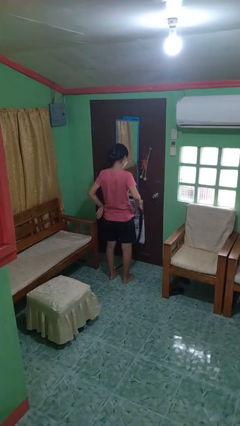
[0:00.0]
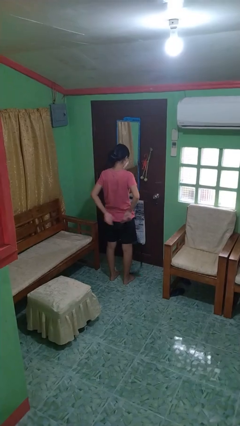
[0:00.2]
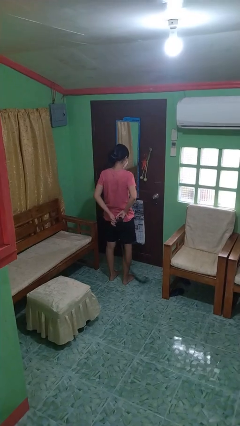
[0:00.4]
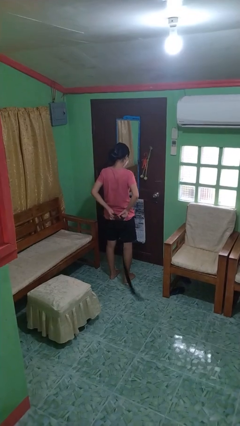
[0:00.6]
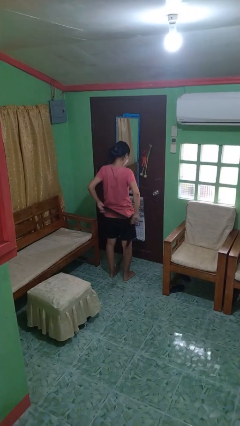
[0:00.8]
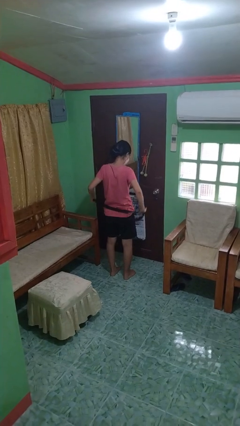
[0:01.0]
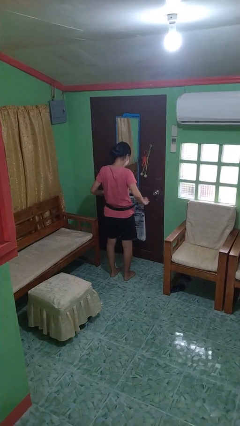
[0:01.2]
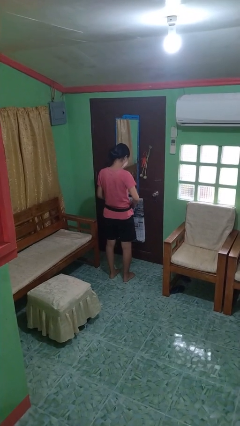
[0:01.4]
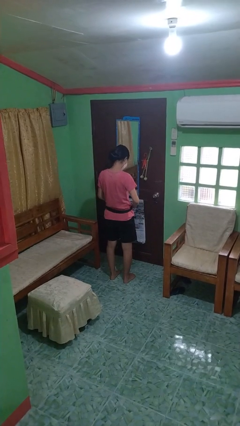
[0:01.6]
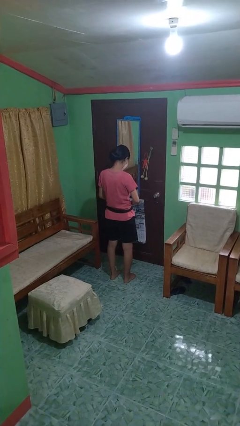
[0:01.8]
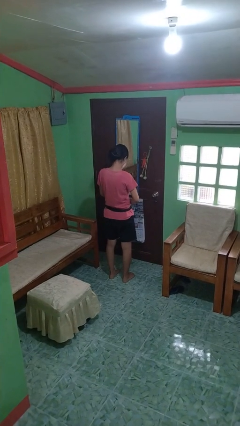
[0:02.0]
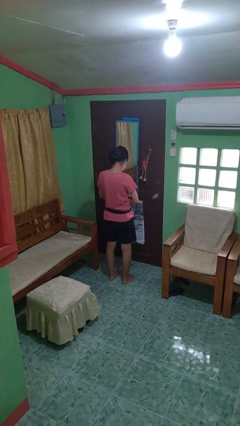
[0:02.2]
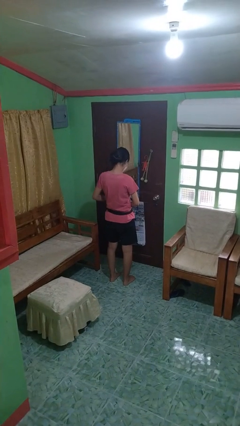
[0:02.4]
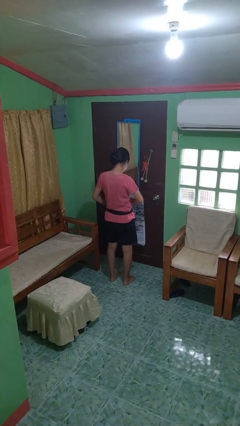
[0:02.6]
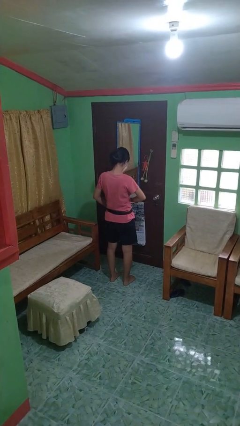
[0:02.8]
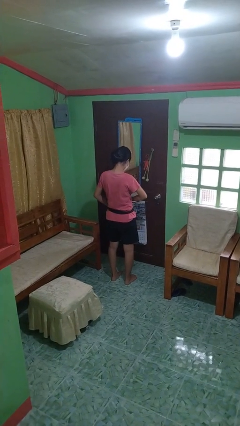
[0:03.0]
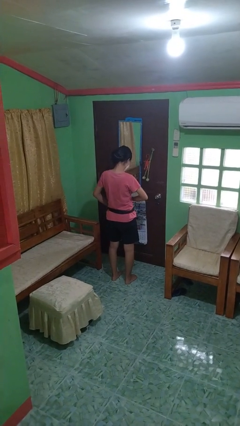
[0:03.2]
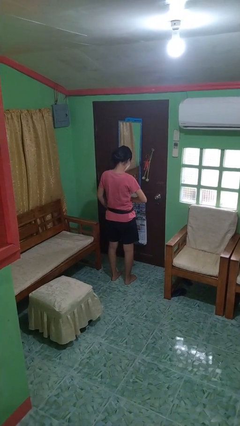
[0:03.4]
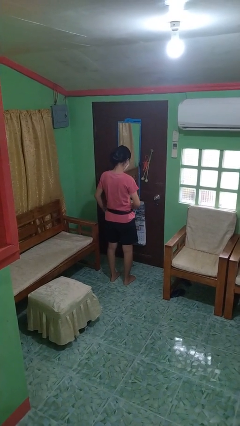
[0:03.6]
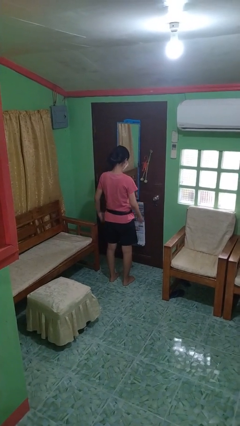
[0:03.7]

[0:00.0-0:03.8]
person puts on belt

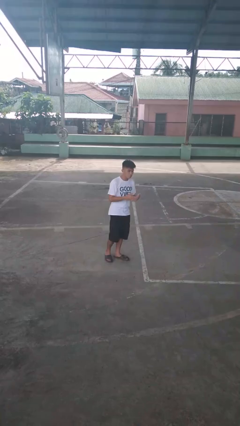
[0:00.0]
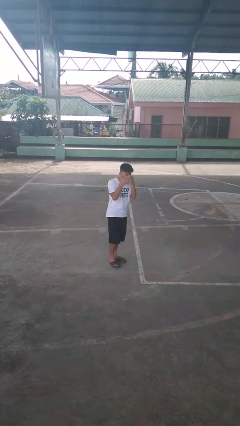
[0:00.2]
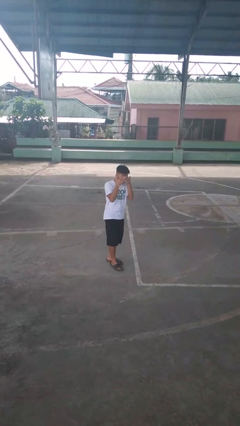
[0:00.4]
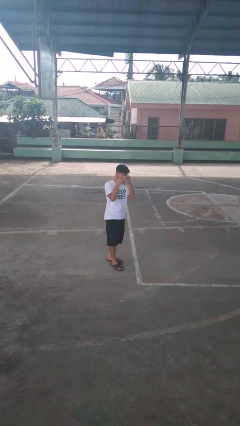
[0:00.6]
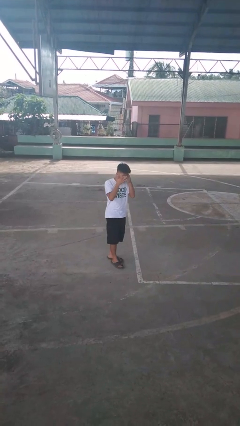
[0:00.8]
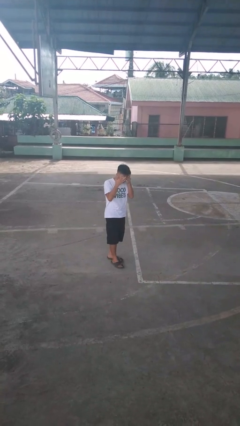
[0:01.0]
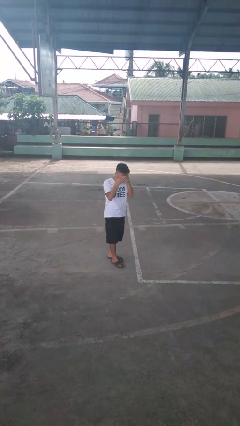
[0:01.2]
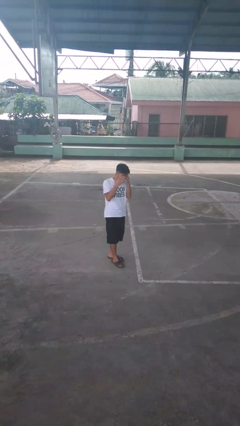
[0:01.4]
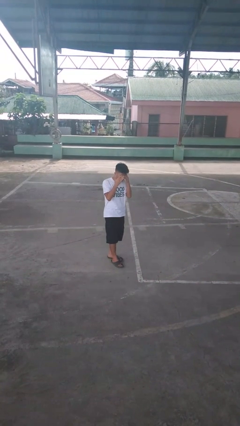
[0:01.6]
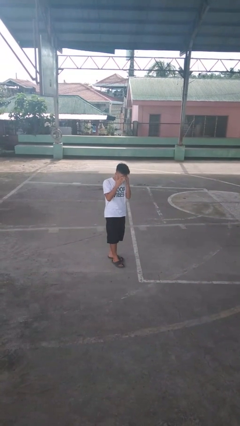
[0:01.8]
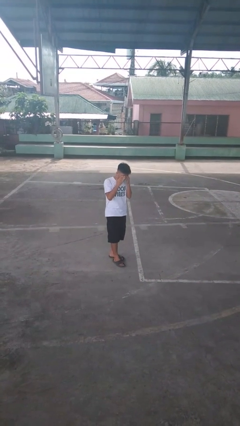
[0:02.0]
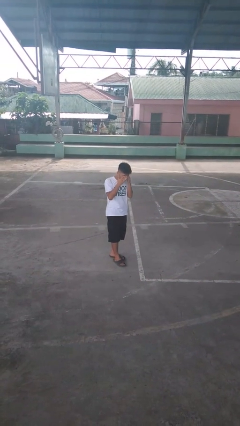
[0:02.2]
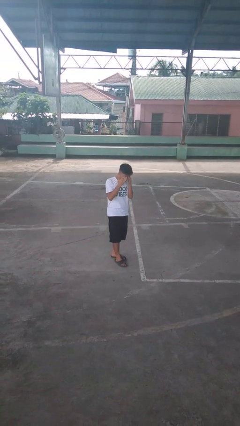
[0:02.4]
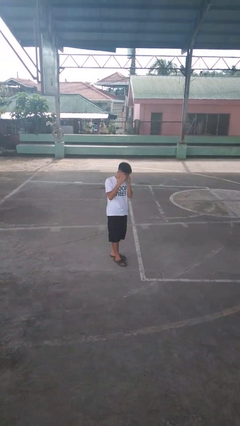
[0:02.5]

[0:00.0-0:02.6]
person rubs eyes

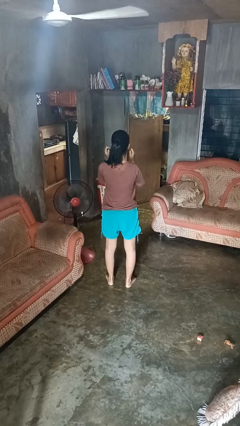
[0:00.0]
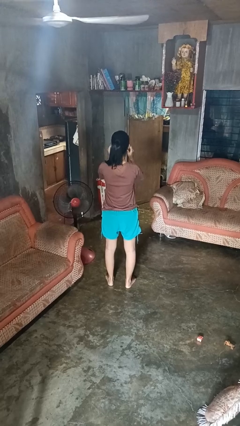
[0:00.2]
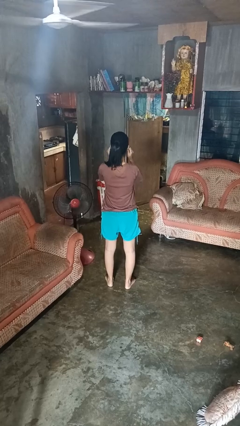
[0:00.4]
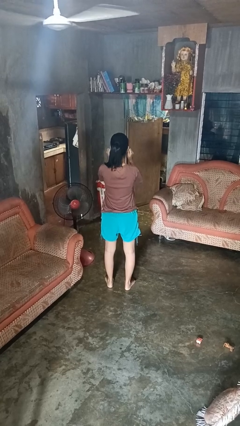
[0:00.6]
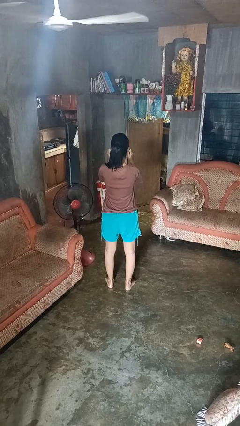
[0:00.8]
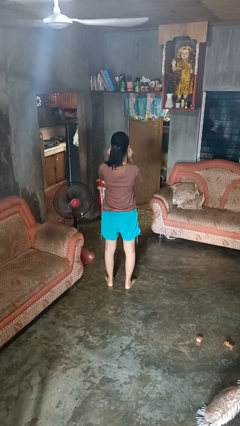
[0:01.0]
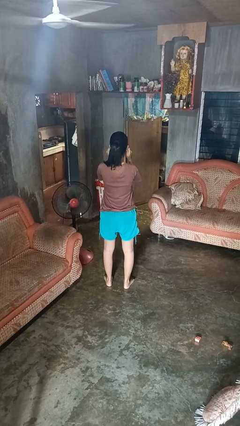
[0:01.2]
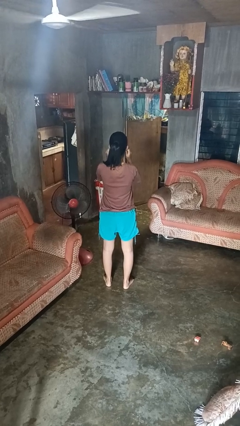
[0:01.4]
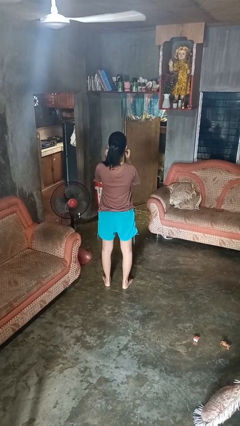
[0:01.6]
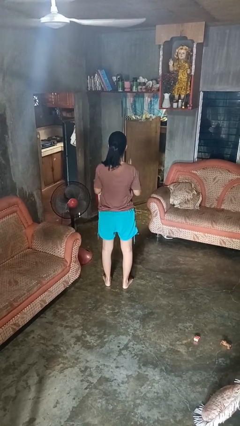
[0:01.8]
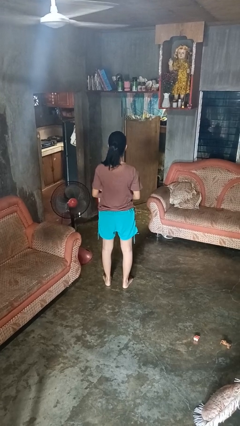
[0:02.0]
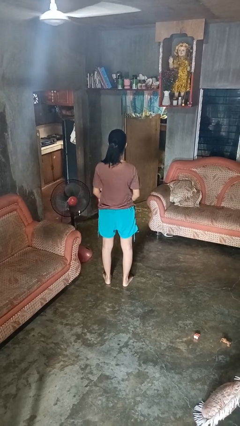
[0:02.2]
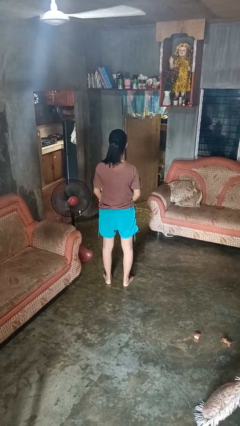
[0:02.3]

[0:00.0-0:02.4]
person touches earlobe

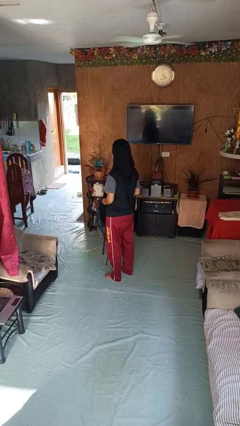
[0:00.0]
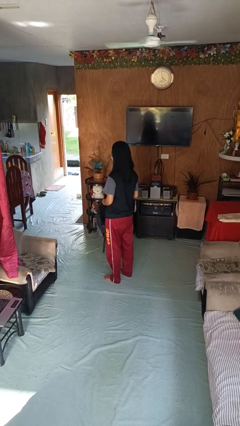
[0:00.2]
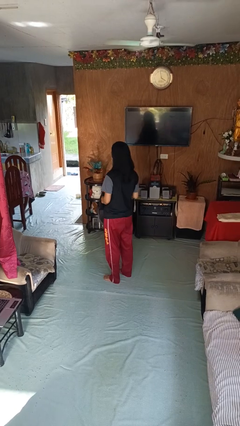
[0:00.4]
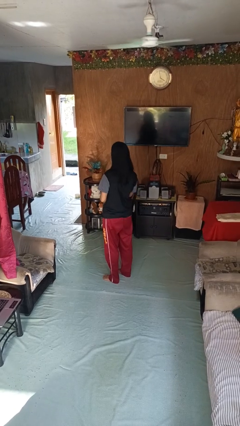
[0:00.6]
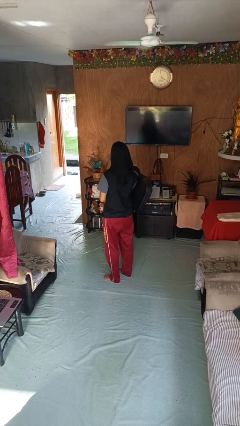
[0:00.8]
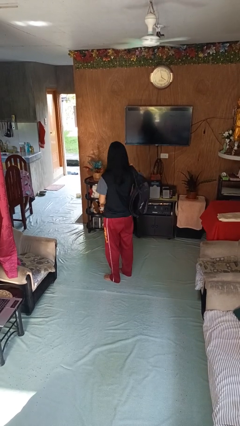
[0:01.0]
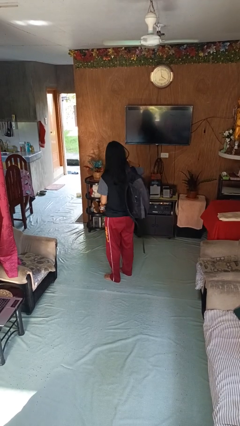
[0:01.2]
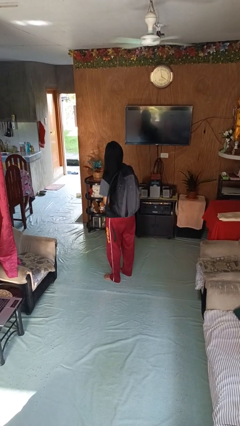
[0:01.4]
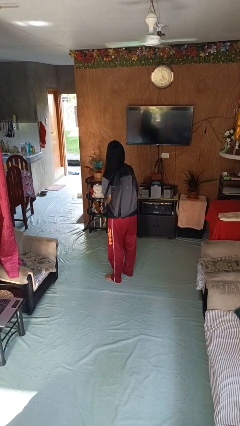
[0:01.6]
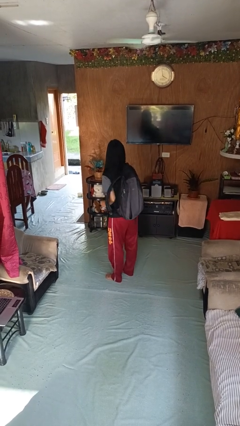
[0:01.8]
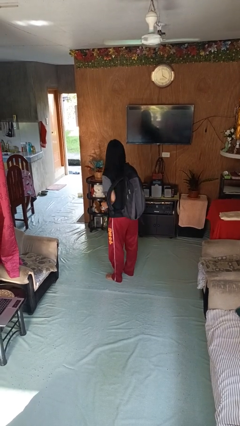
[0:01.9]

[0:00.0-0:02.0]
person puts on backpack

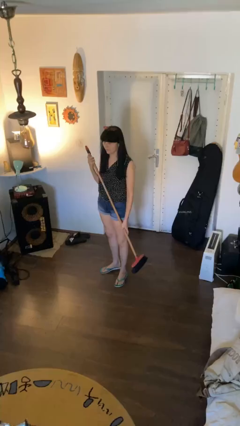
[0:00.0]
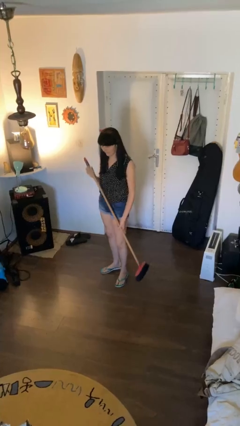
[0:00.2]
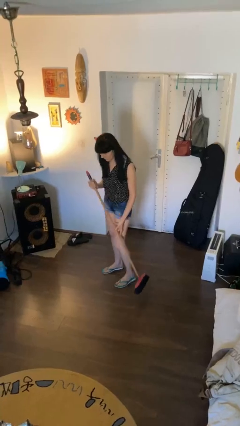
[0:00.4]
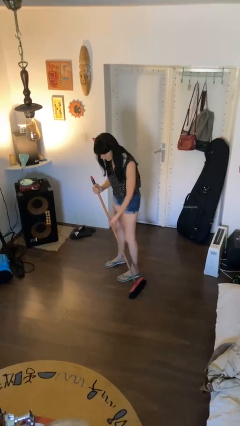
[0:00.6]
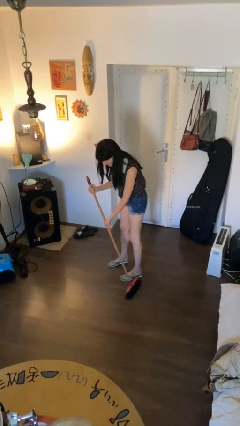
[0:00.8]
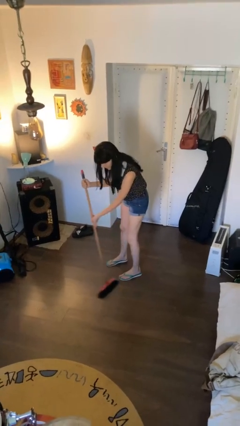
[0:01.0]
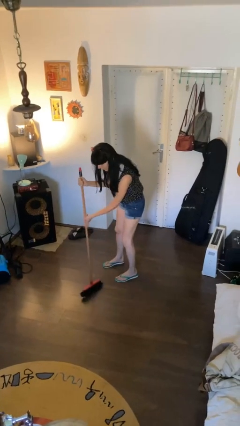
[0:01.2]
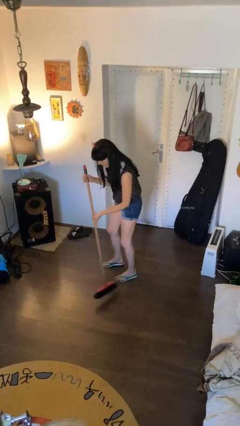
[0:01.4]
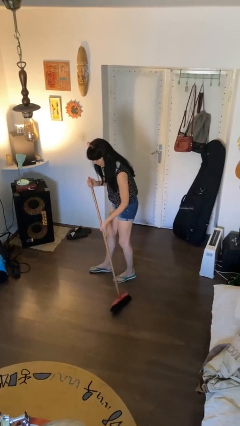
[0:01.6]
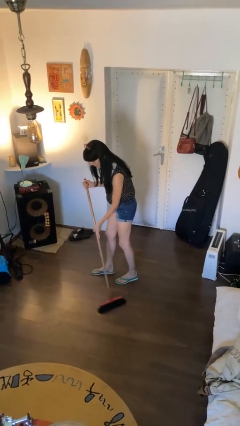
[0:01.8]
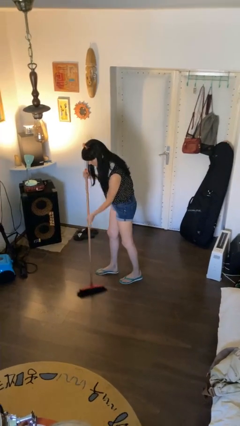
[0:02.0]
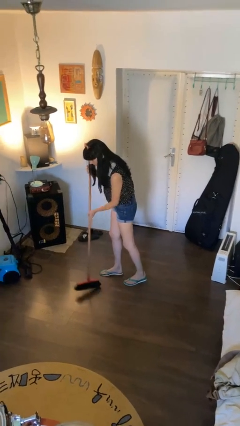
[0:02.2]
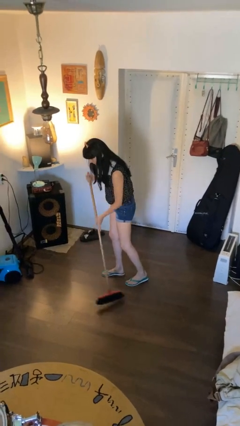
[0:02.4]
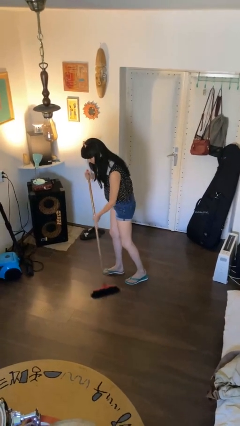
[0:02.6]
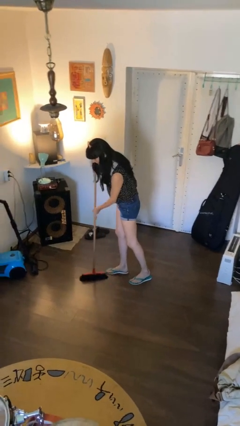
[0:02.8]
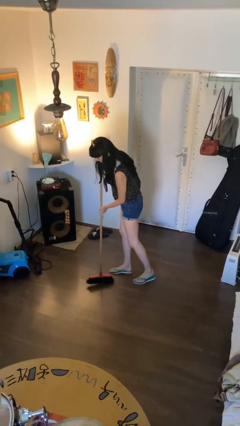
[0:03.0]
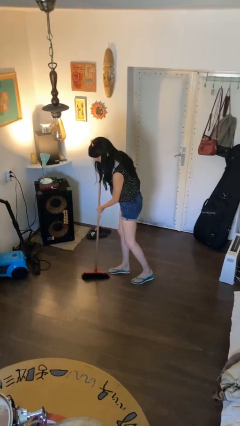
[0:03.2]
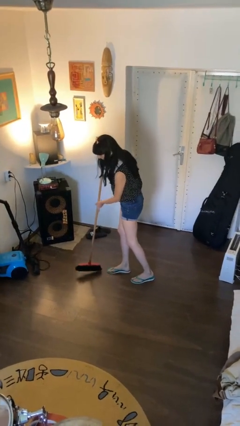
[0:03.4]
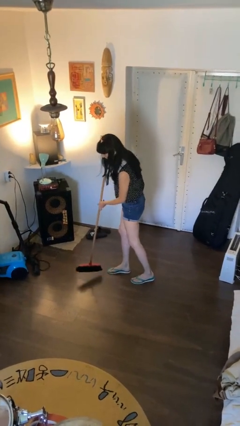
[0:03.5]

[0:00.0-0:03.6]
person sweeps floor

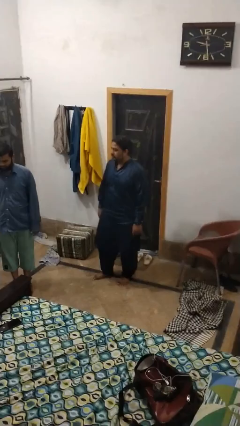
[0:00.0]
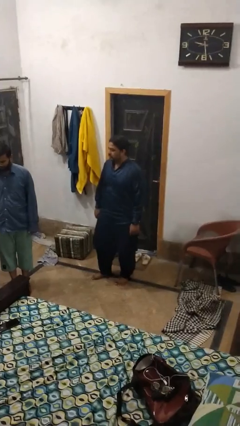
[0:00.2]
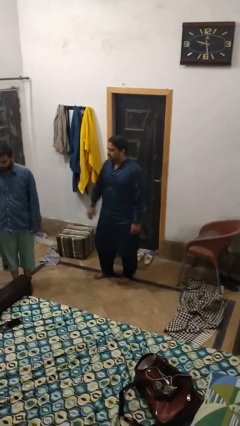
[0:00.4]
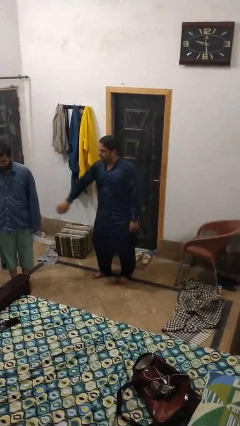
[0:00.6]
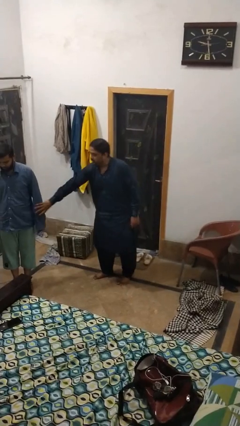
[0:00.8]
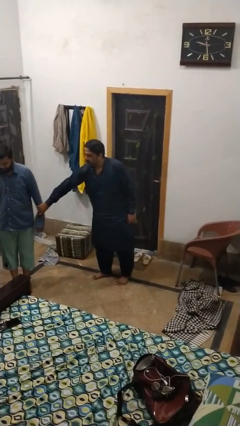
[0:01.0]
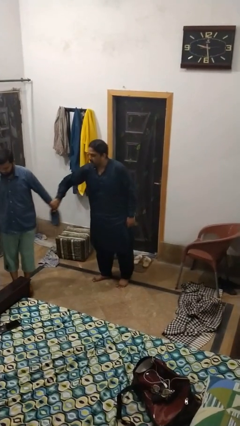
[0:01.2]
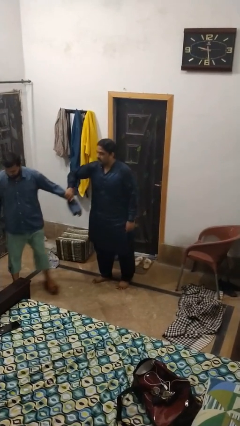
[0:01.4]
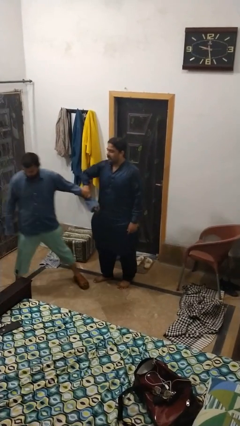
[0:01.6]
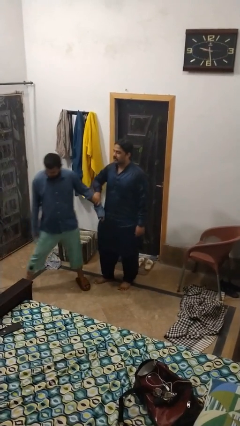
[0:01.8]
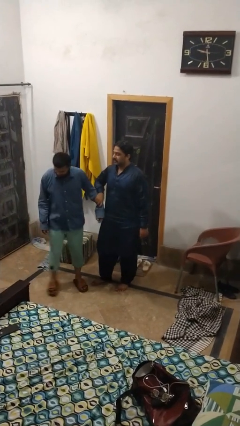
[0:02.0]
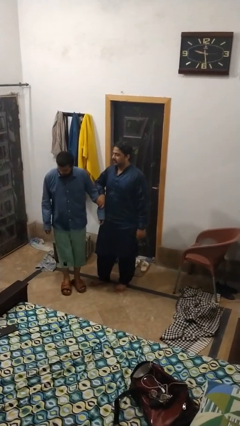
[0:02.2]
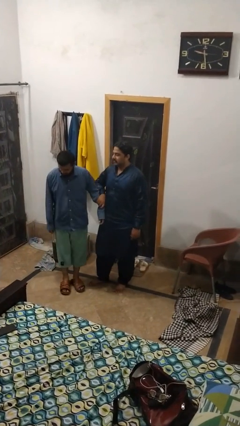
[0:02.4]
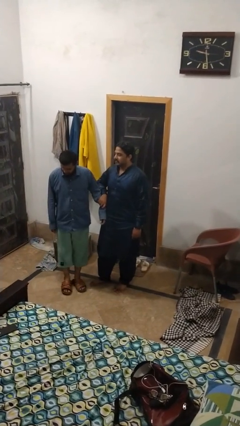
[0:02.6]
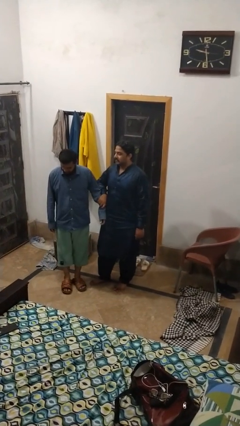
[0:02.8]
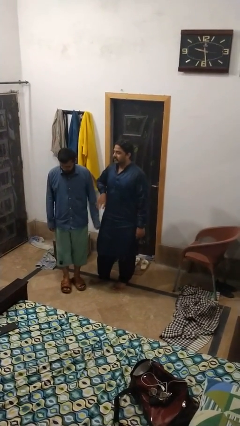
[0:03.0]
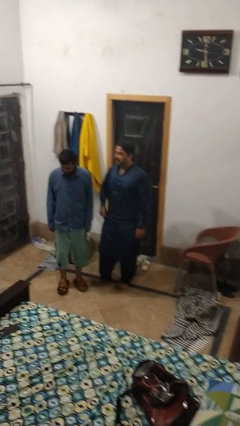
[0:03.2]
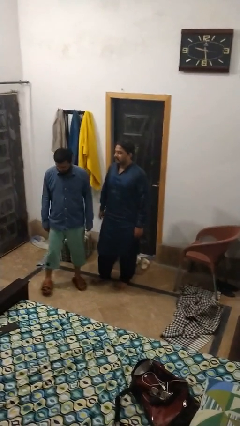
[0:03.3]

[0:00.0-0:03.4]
person grabs person by forearm
